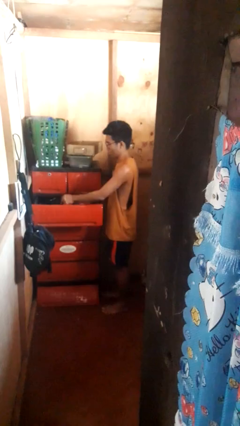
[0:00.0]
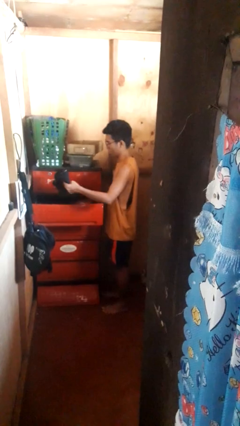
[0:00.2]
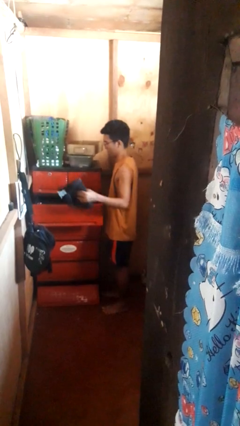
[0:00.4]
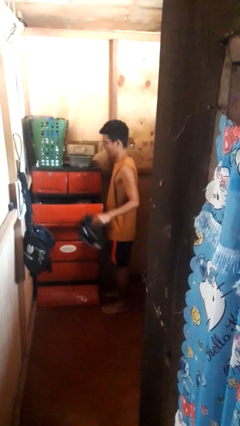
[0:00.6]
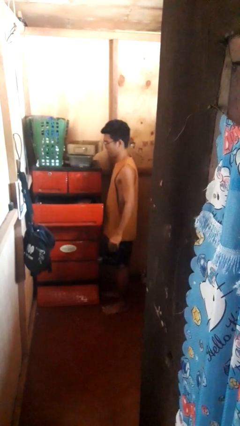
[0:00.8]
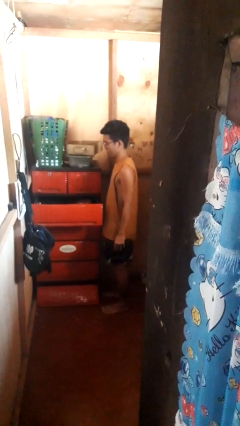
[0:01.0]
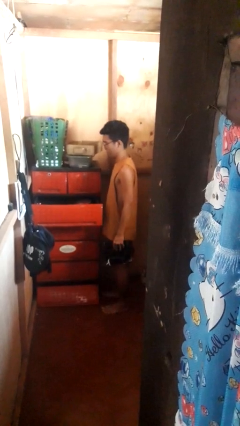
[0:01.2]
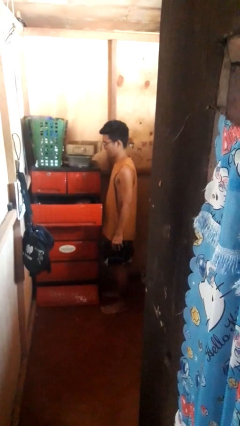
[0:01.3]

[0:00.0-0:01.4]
person takes clothes from dresser

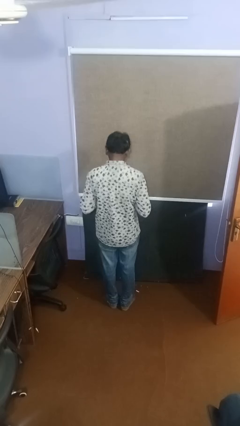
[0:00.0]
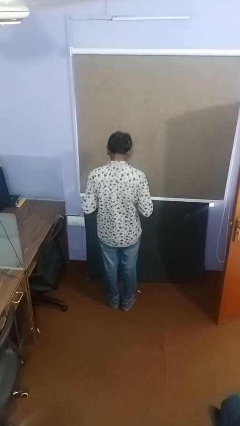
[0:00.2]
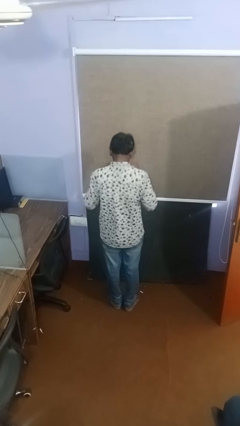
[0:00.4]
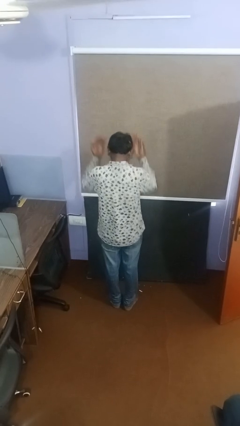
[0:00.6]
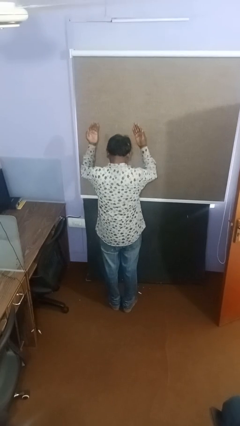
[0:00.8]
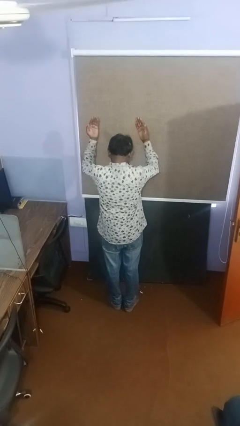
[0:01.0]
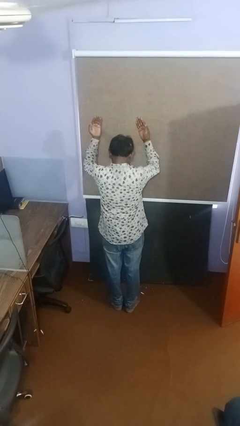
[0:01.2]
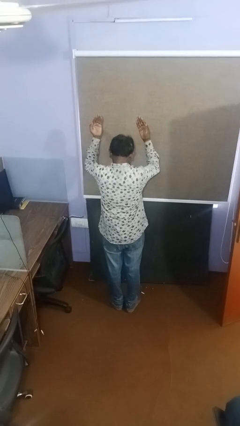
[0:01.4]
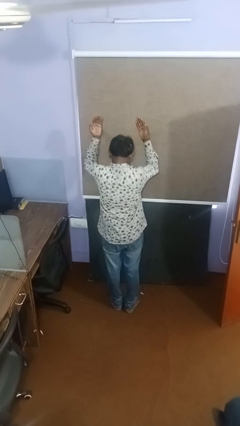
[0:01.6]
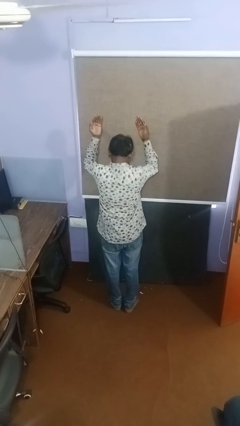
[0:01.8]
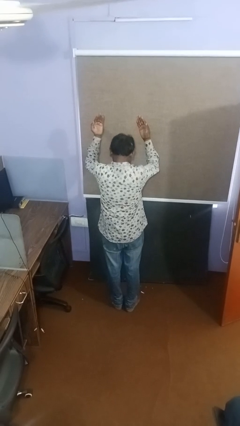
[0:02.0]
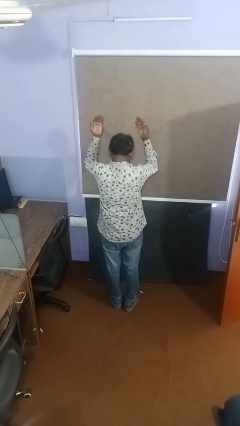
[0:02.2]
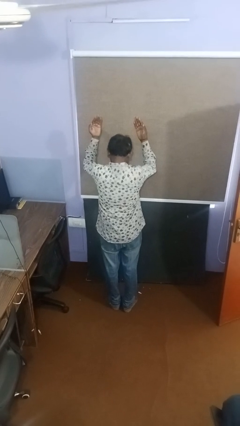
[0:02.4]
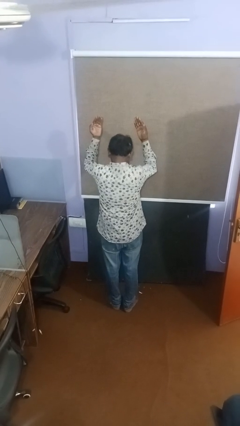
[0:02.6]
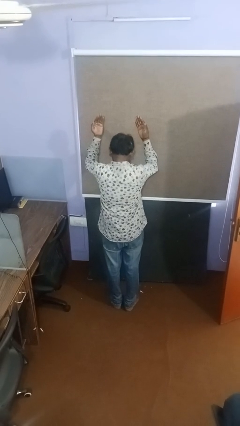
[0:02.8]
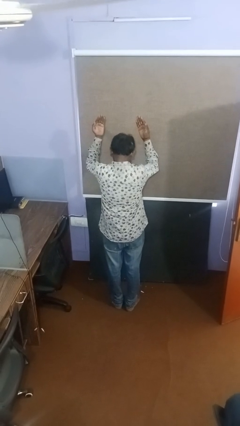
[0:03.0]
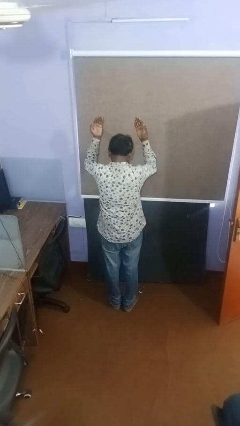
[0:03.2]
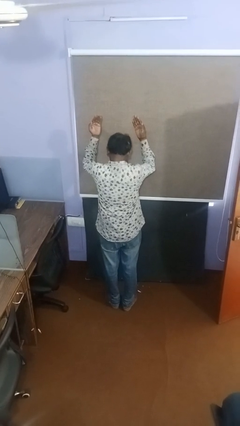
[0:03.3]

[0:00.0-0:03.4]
person gestures swipe up

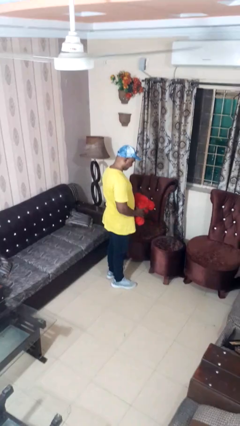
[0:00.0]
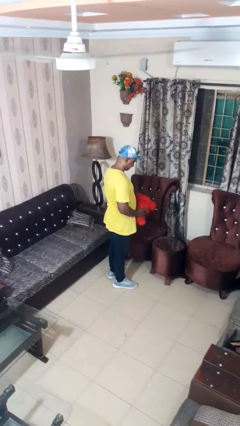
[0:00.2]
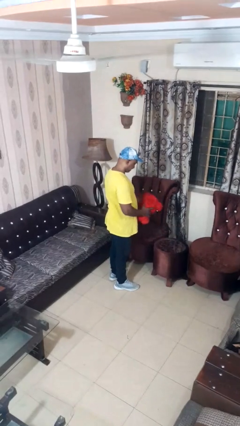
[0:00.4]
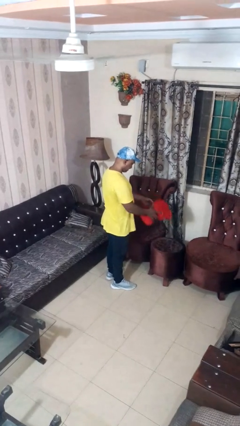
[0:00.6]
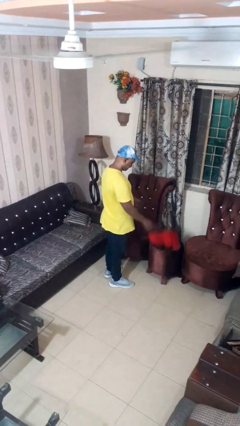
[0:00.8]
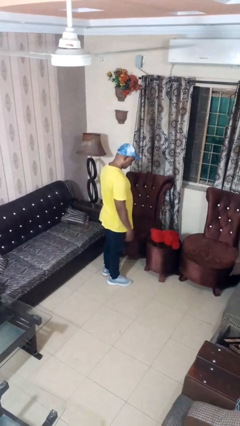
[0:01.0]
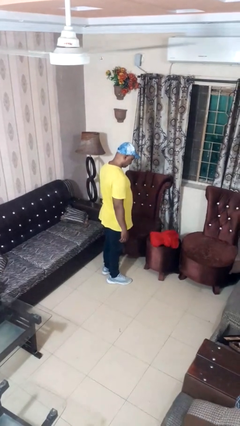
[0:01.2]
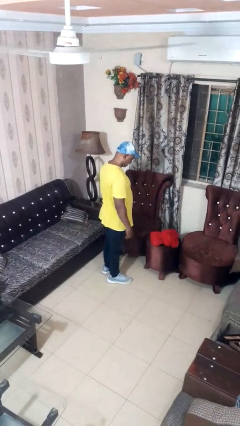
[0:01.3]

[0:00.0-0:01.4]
person throws object on table

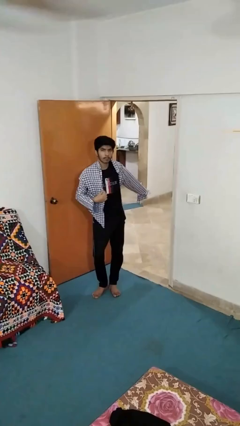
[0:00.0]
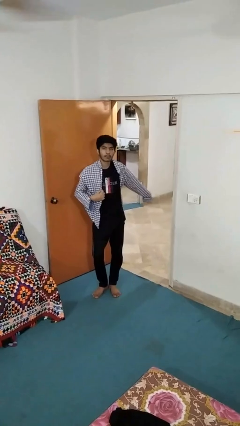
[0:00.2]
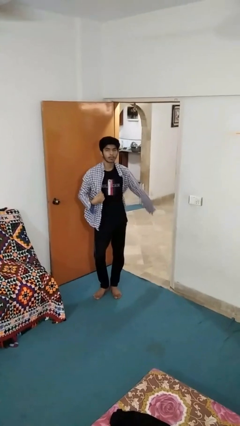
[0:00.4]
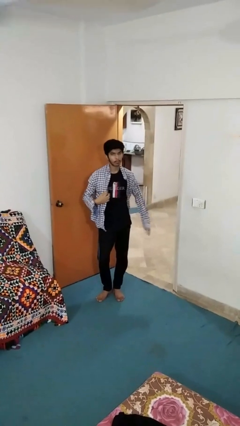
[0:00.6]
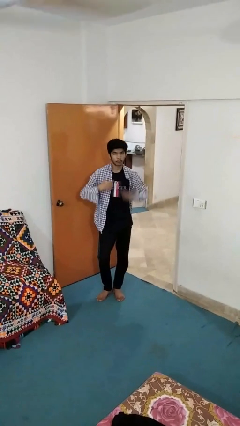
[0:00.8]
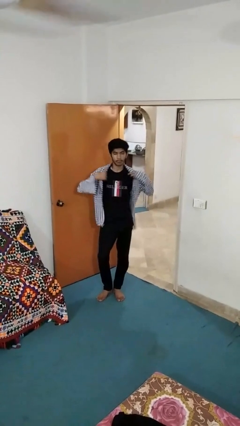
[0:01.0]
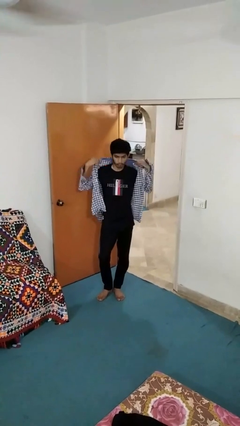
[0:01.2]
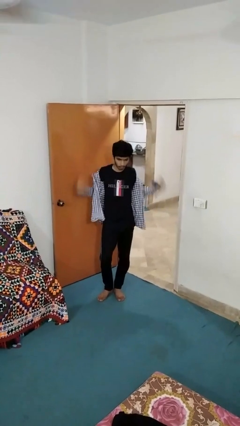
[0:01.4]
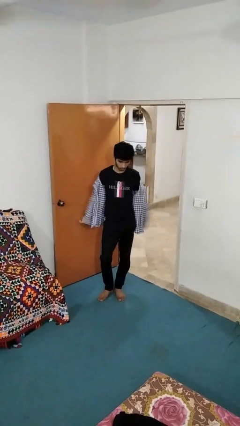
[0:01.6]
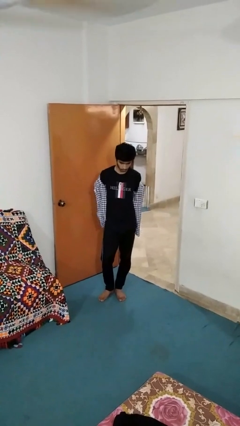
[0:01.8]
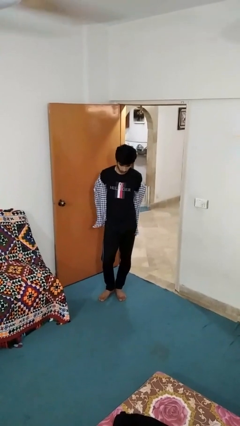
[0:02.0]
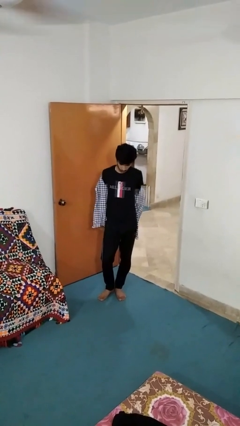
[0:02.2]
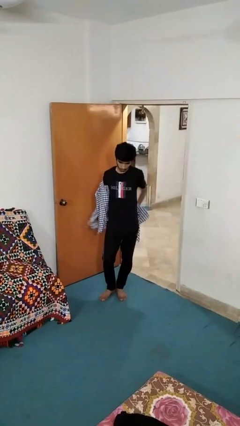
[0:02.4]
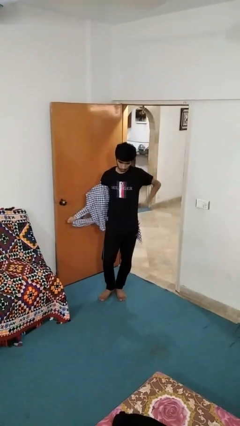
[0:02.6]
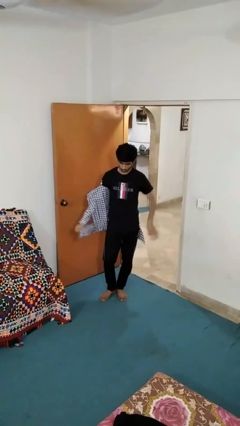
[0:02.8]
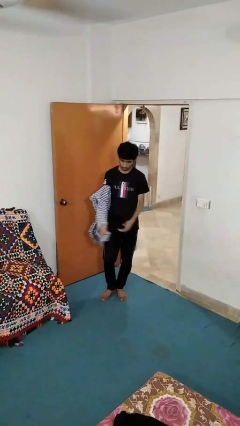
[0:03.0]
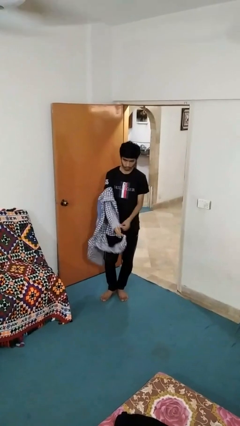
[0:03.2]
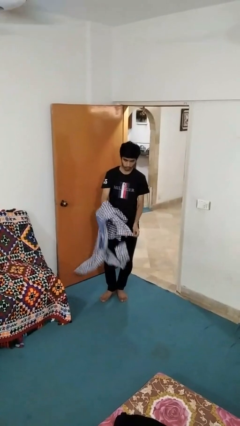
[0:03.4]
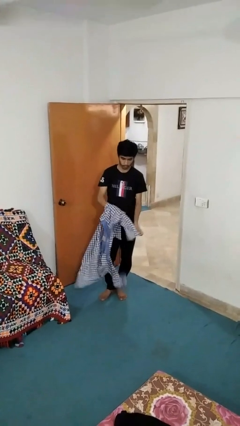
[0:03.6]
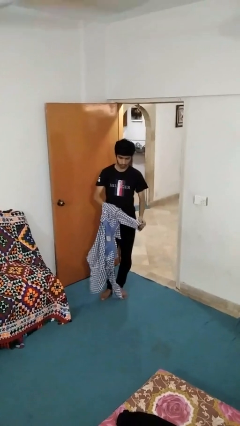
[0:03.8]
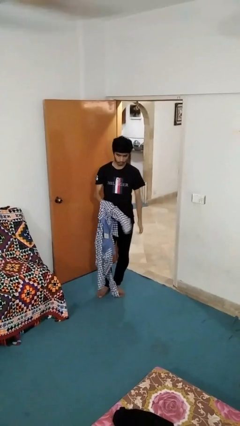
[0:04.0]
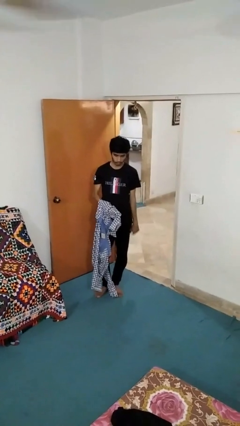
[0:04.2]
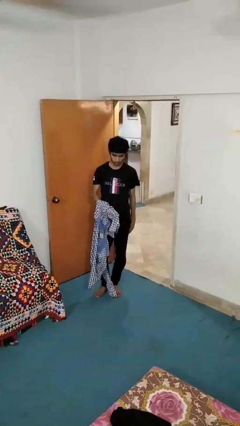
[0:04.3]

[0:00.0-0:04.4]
person takes off shirt

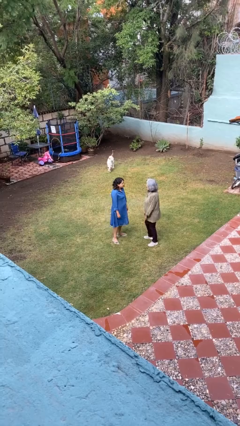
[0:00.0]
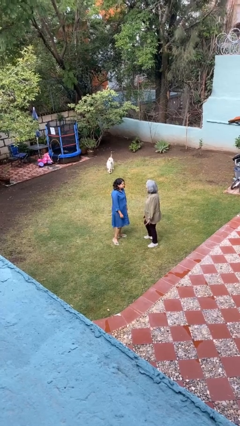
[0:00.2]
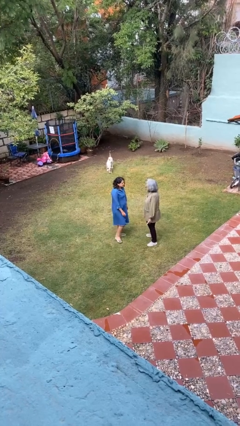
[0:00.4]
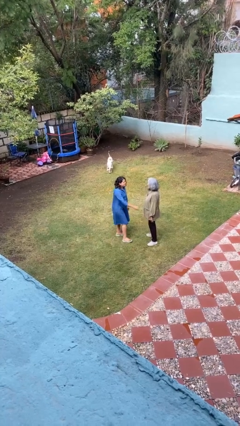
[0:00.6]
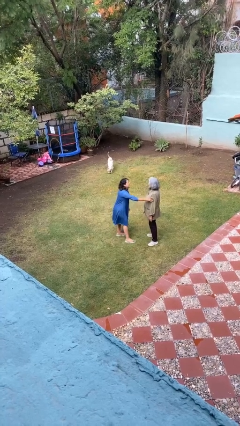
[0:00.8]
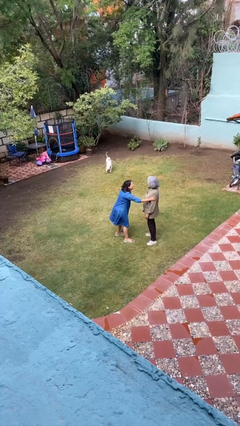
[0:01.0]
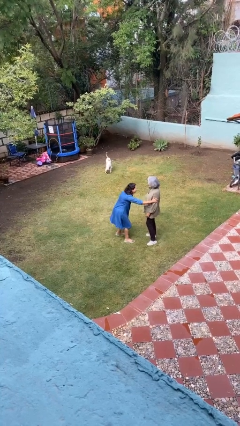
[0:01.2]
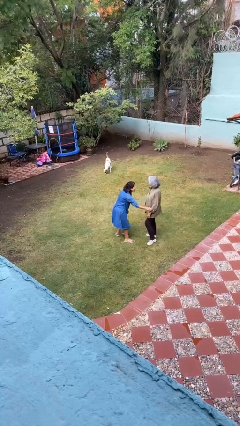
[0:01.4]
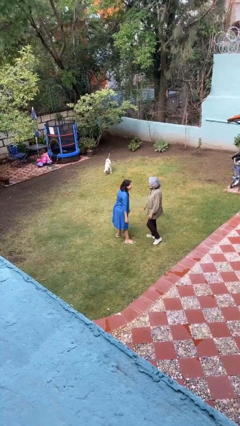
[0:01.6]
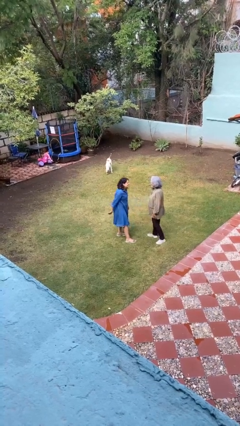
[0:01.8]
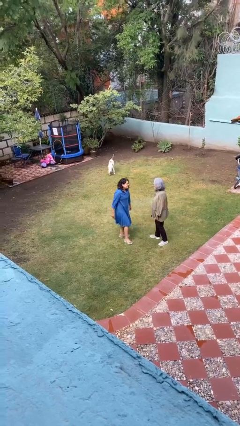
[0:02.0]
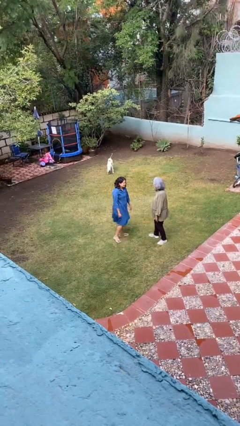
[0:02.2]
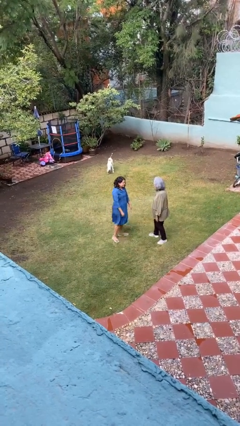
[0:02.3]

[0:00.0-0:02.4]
person shoves person

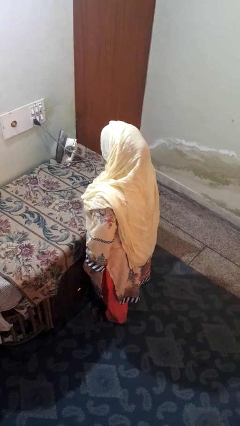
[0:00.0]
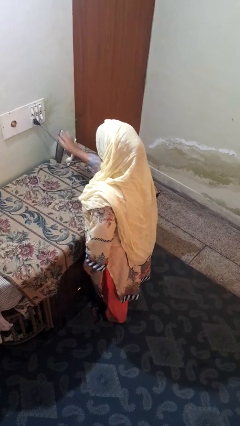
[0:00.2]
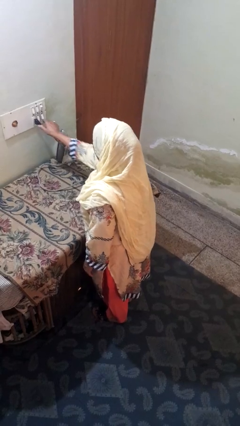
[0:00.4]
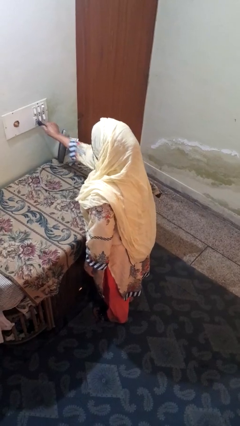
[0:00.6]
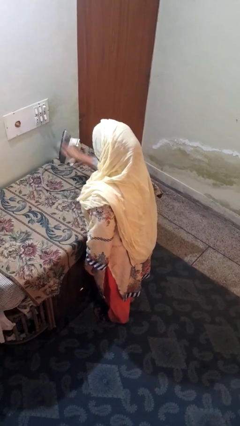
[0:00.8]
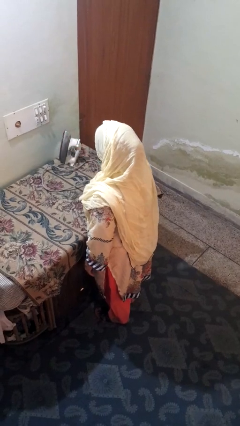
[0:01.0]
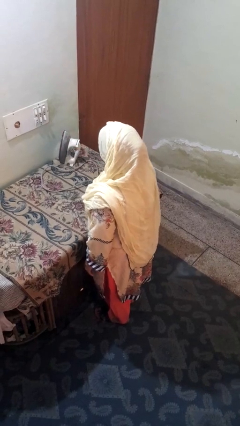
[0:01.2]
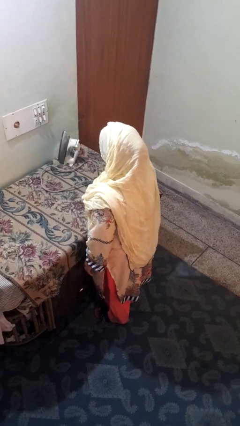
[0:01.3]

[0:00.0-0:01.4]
person unplugs from electrical socket

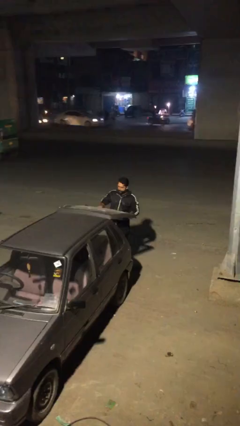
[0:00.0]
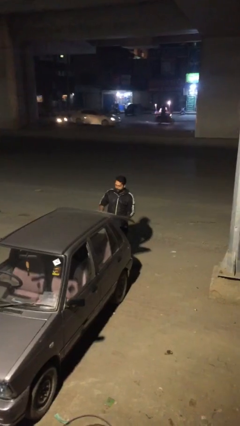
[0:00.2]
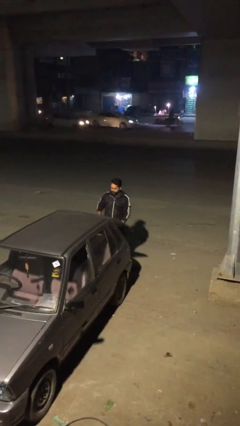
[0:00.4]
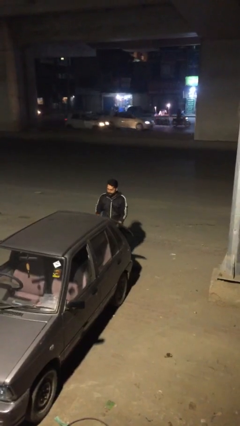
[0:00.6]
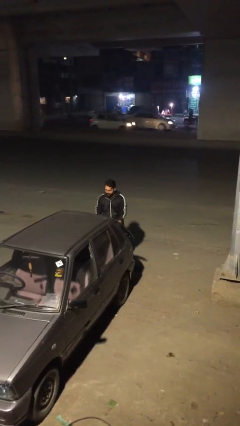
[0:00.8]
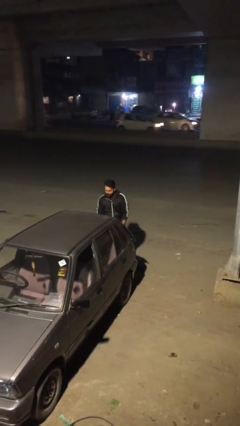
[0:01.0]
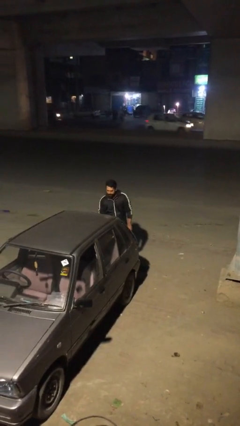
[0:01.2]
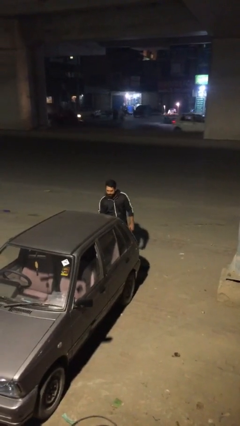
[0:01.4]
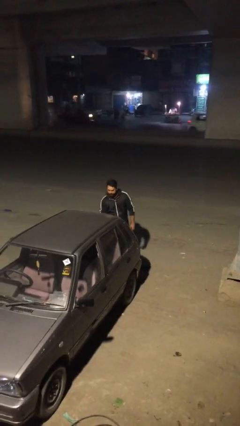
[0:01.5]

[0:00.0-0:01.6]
person closes car trunk

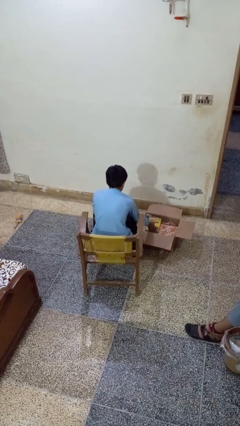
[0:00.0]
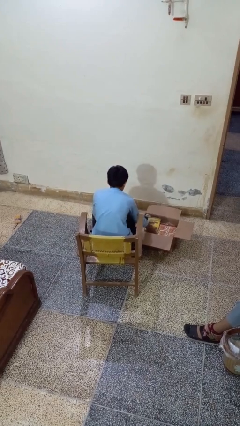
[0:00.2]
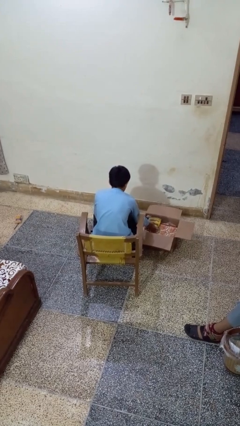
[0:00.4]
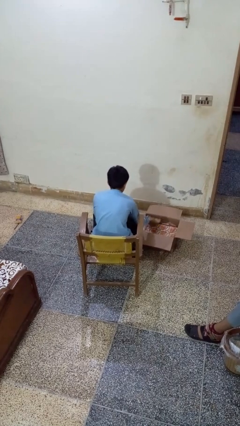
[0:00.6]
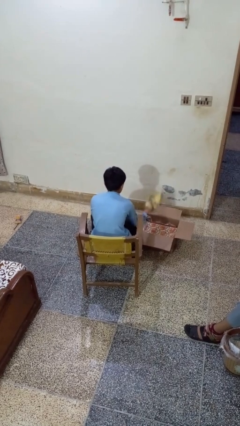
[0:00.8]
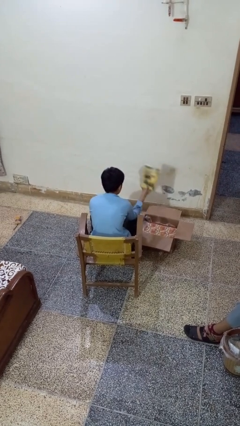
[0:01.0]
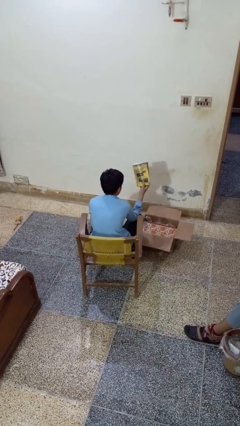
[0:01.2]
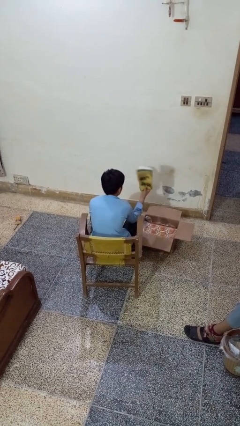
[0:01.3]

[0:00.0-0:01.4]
person takes object from box
